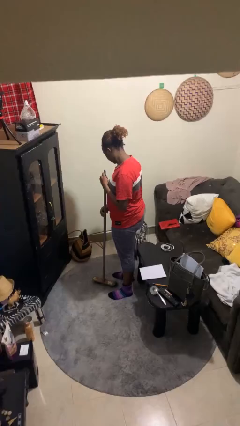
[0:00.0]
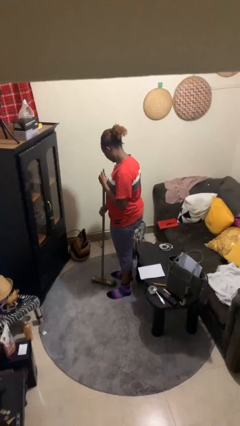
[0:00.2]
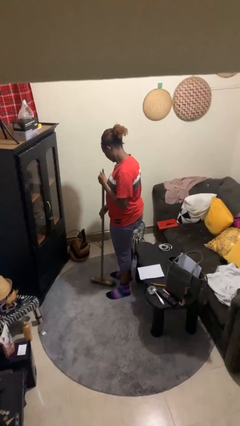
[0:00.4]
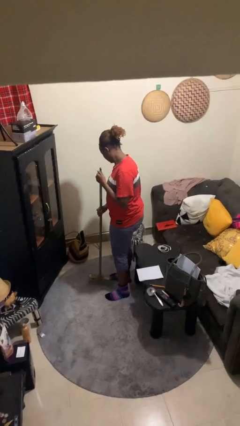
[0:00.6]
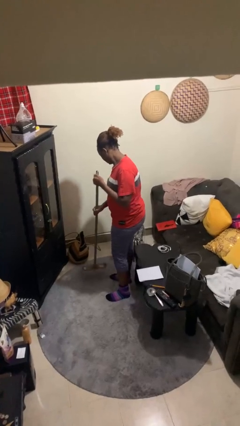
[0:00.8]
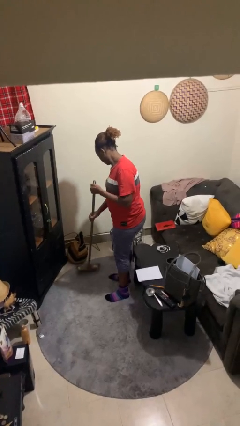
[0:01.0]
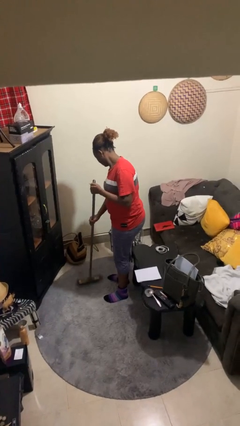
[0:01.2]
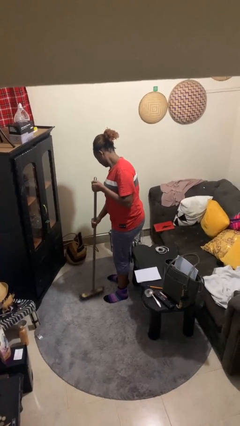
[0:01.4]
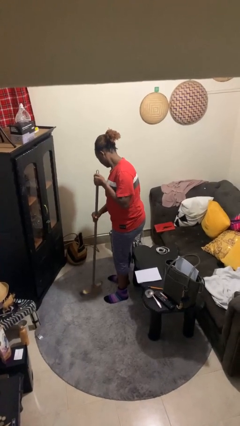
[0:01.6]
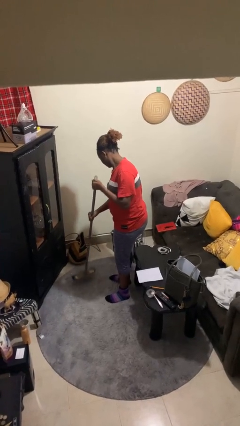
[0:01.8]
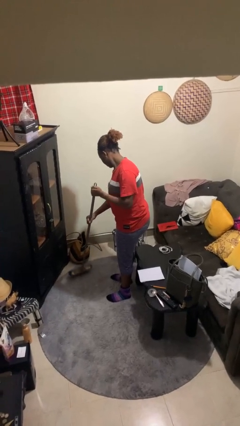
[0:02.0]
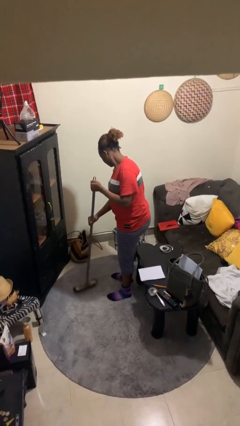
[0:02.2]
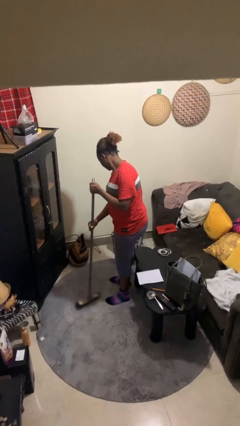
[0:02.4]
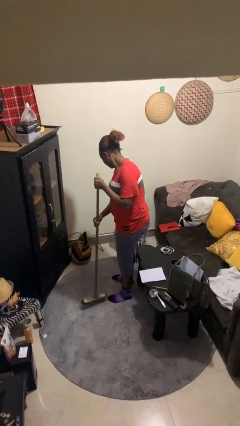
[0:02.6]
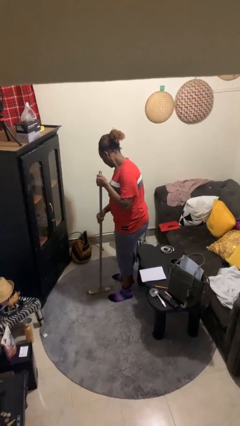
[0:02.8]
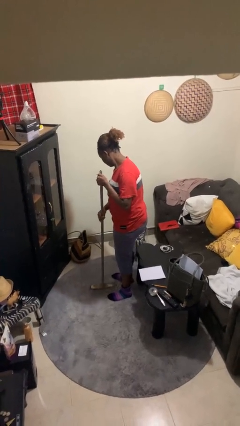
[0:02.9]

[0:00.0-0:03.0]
person sweeps floor

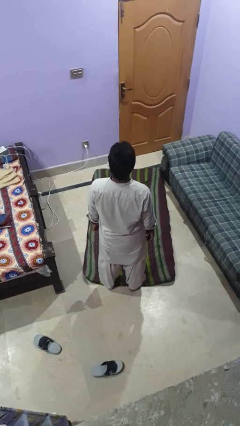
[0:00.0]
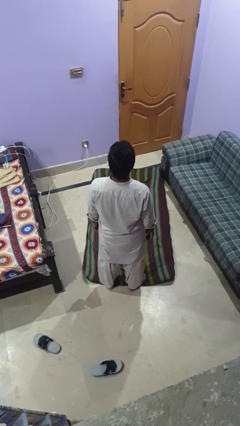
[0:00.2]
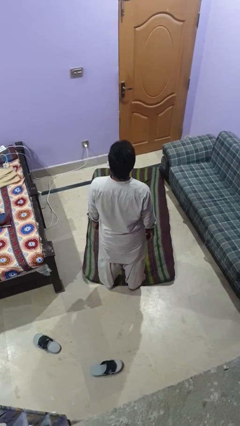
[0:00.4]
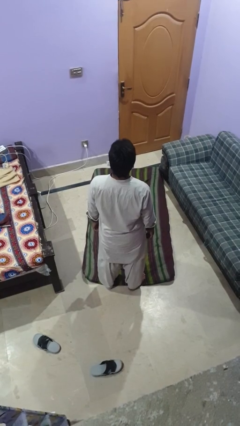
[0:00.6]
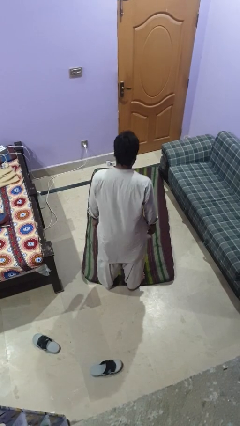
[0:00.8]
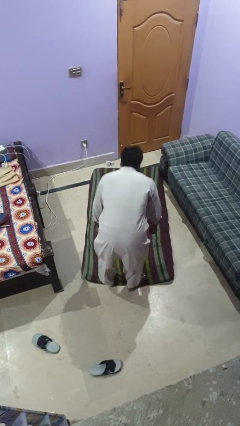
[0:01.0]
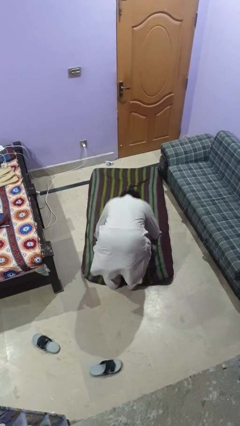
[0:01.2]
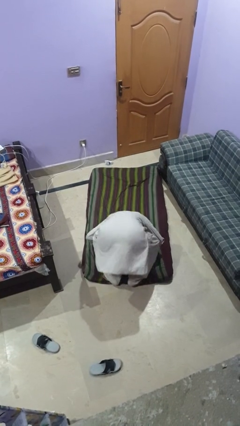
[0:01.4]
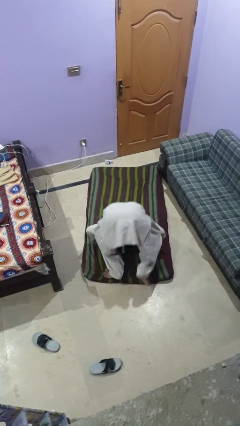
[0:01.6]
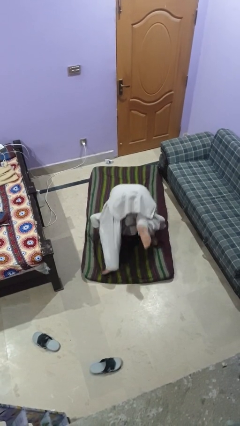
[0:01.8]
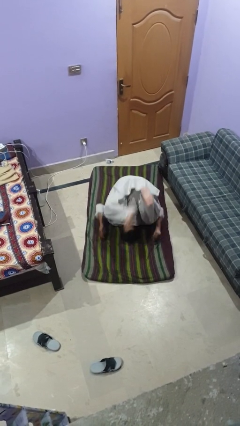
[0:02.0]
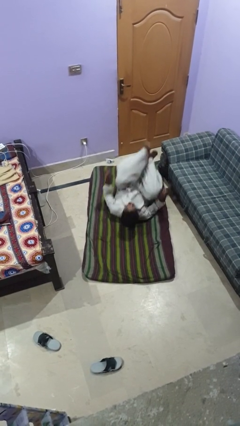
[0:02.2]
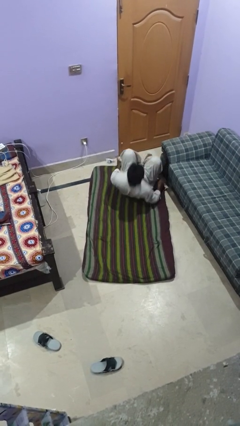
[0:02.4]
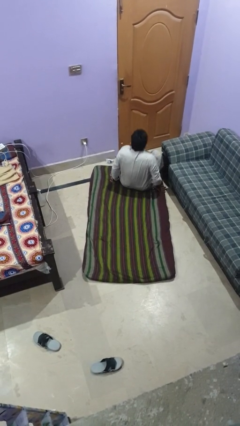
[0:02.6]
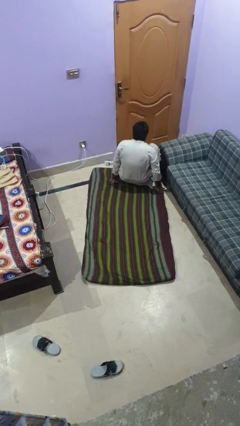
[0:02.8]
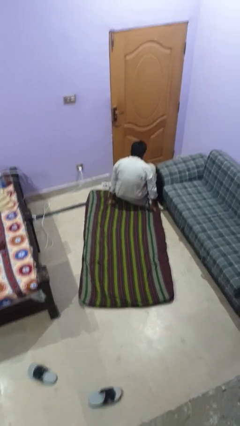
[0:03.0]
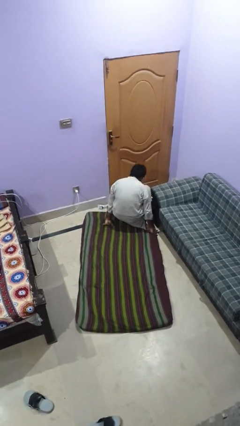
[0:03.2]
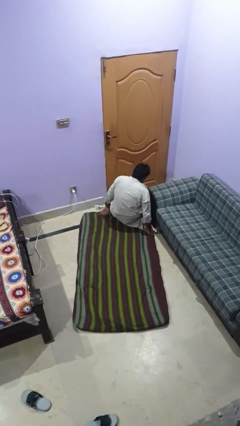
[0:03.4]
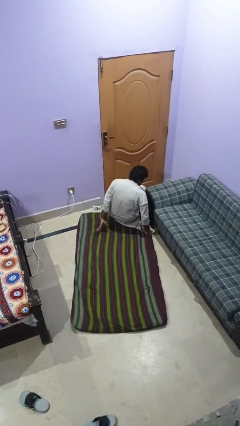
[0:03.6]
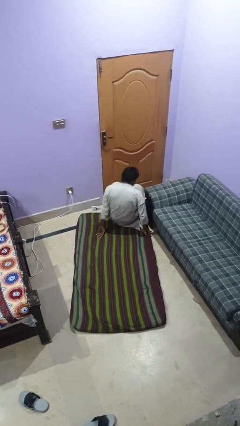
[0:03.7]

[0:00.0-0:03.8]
person somersaults

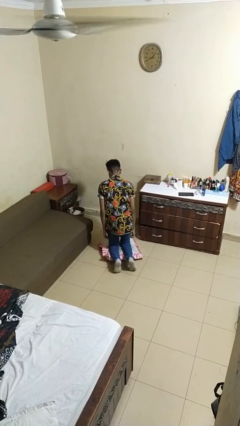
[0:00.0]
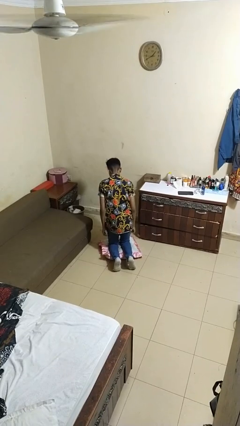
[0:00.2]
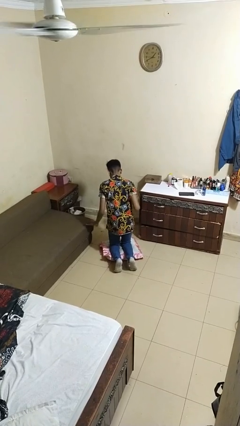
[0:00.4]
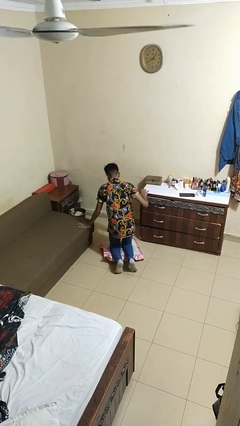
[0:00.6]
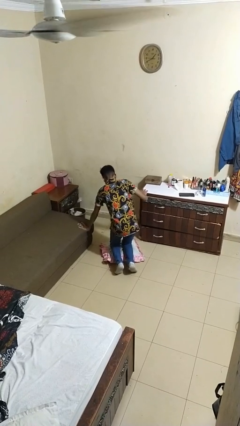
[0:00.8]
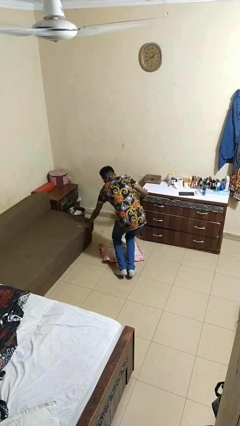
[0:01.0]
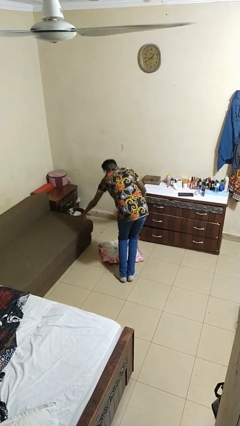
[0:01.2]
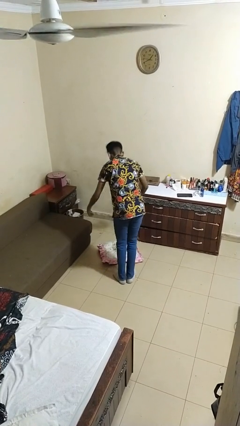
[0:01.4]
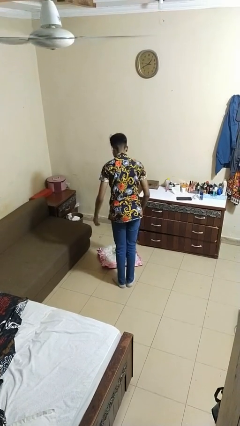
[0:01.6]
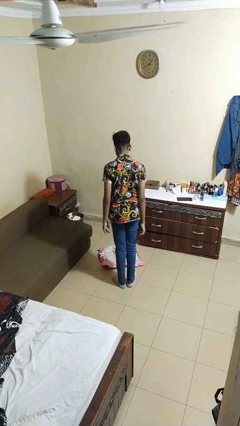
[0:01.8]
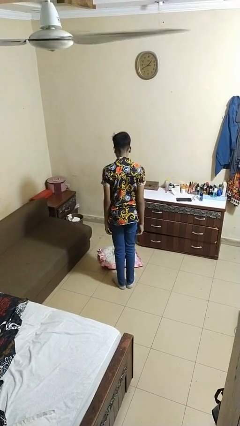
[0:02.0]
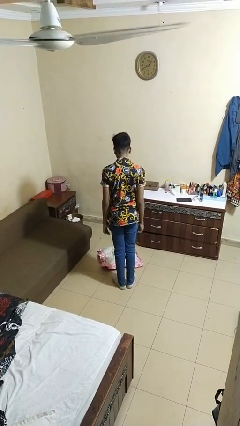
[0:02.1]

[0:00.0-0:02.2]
person stands up from floor

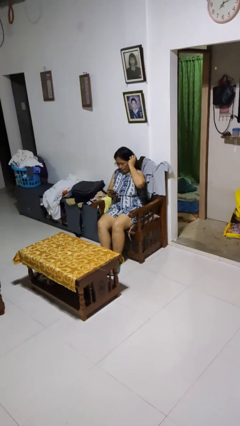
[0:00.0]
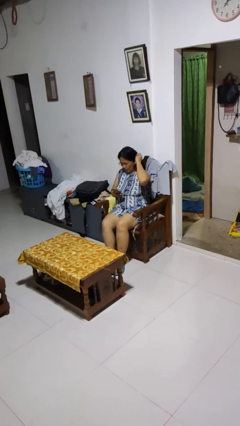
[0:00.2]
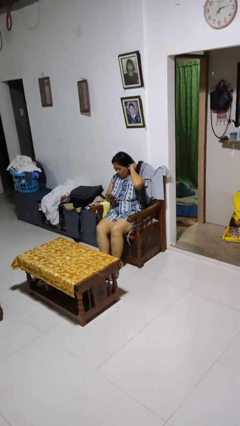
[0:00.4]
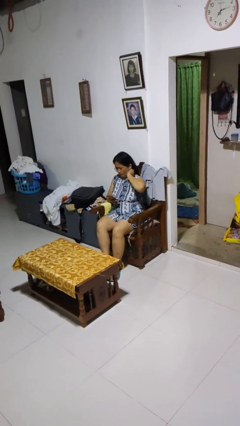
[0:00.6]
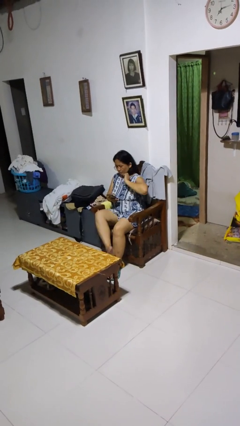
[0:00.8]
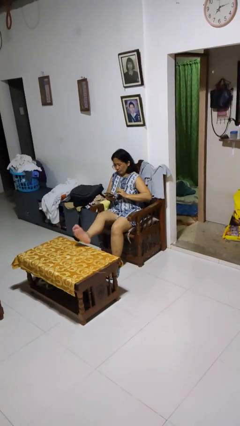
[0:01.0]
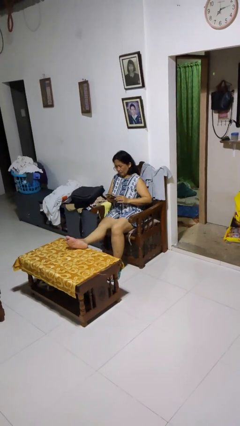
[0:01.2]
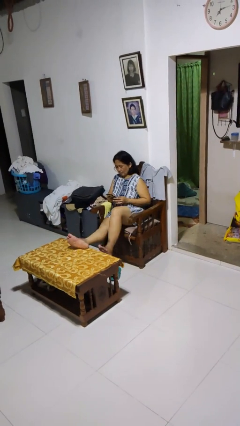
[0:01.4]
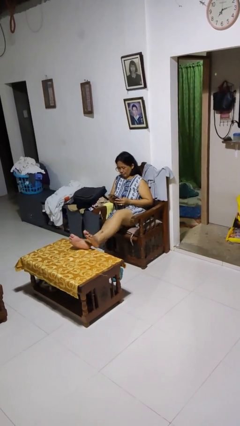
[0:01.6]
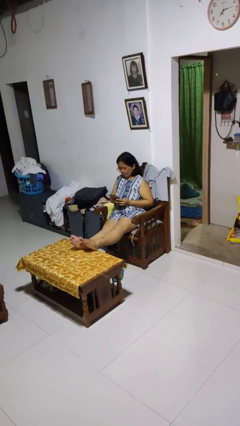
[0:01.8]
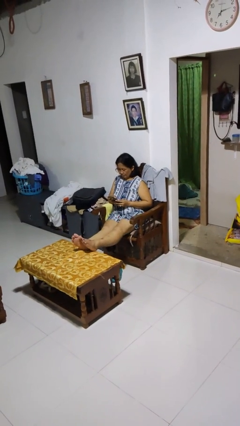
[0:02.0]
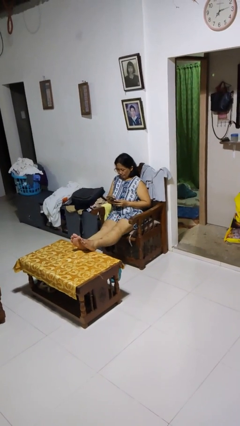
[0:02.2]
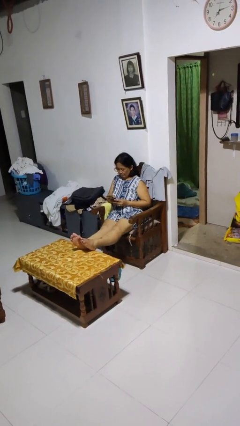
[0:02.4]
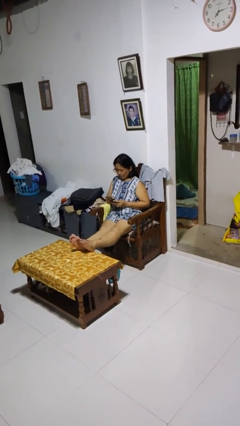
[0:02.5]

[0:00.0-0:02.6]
person puts feet up

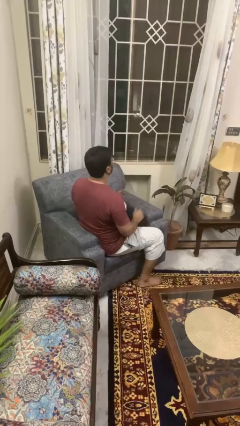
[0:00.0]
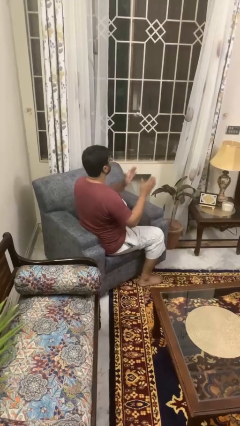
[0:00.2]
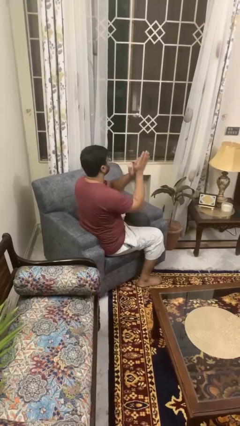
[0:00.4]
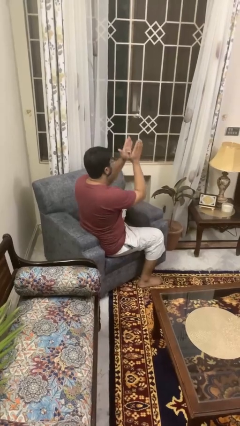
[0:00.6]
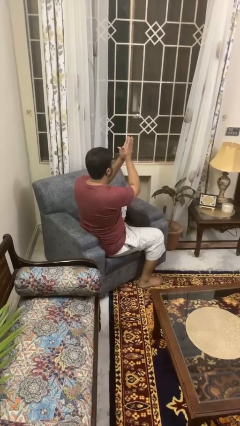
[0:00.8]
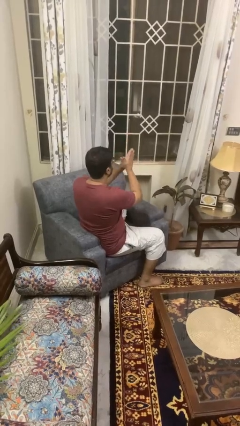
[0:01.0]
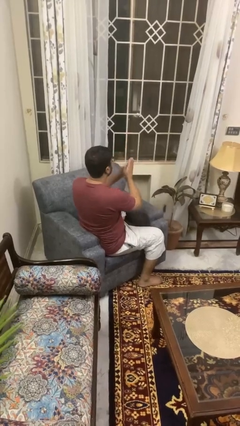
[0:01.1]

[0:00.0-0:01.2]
person swats bug

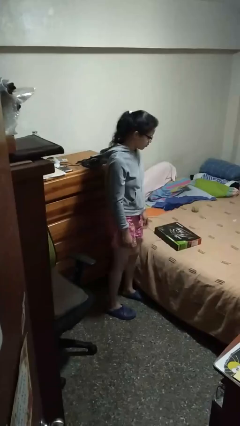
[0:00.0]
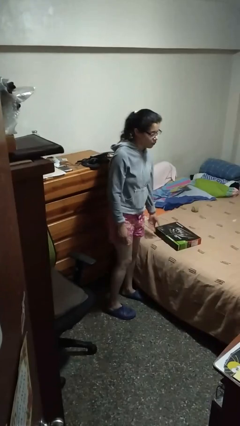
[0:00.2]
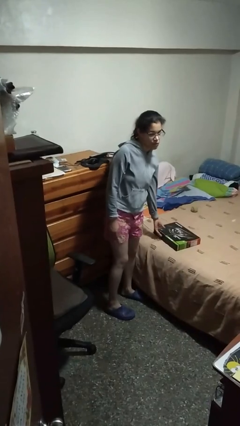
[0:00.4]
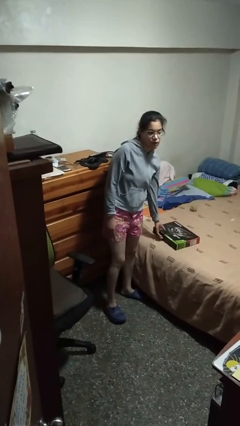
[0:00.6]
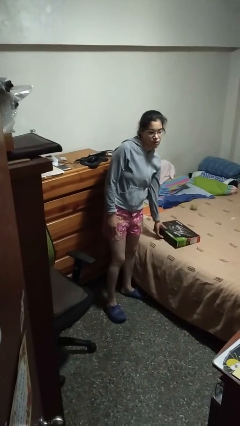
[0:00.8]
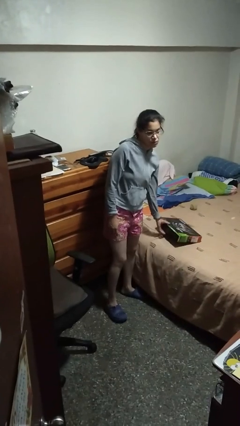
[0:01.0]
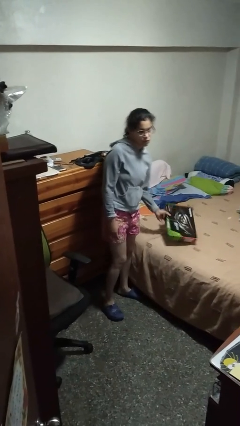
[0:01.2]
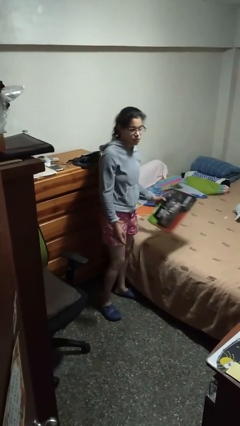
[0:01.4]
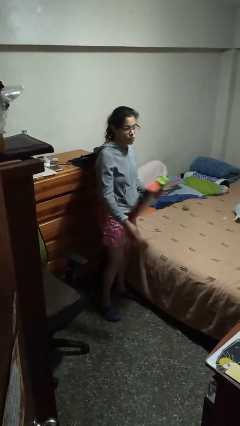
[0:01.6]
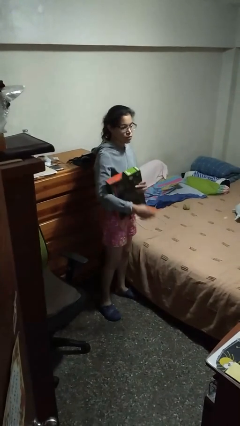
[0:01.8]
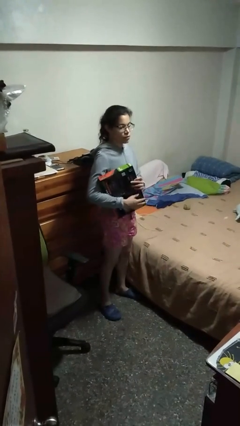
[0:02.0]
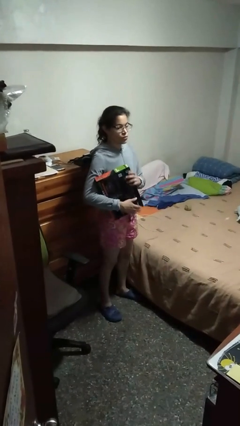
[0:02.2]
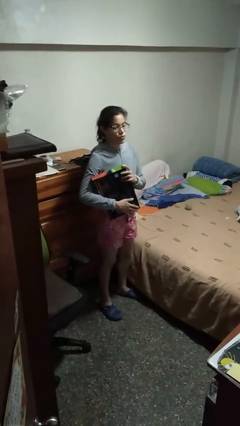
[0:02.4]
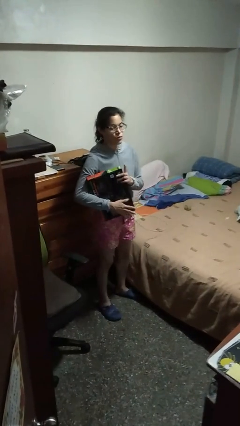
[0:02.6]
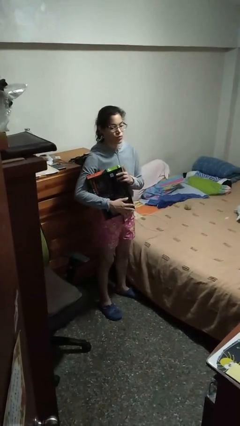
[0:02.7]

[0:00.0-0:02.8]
person picks up object from bed

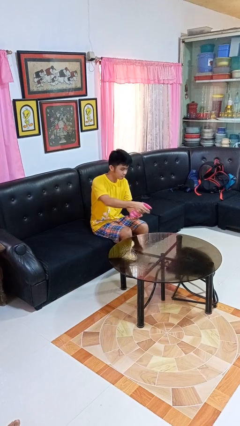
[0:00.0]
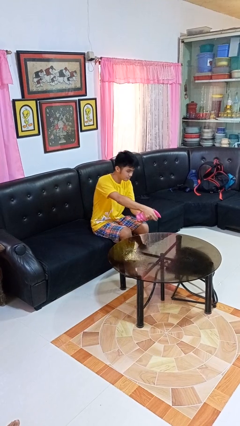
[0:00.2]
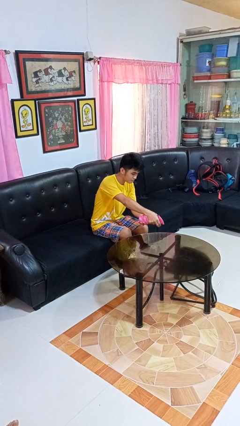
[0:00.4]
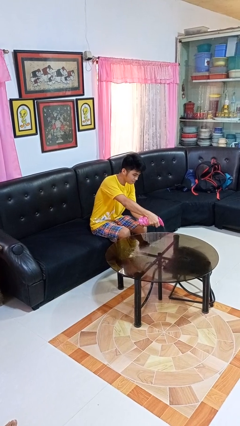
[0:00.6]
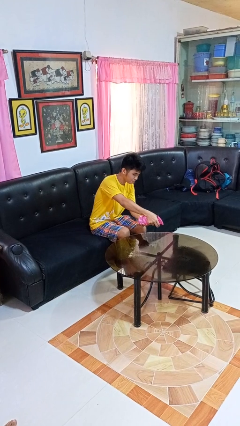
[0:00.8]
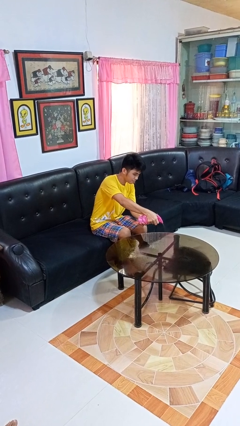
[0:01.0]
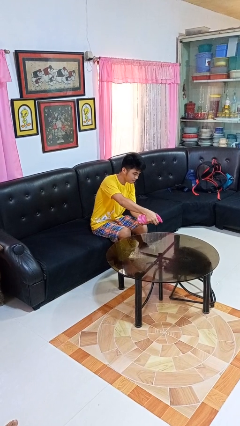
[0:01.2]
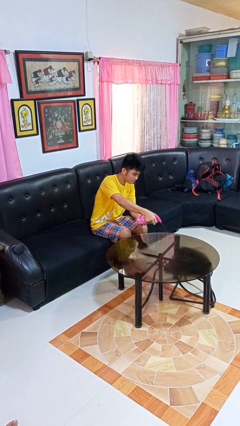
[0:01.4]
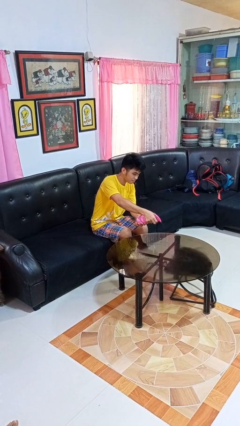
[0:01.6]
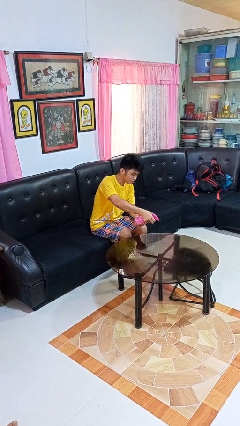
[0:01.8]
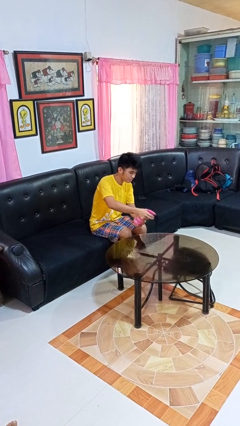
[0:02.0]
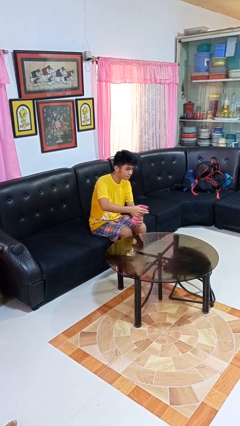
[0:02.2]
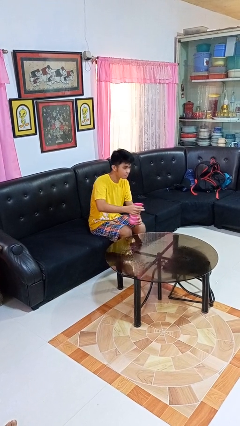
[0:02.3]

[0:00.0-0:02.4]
person sprays from bottle
